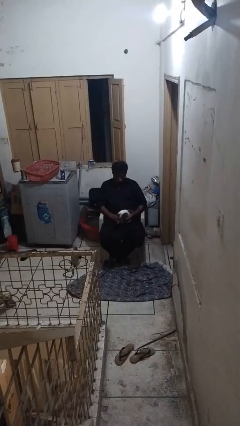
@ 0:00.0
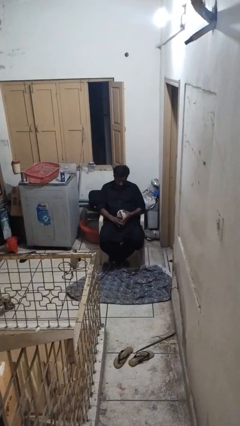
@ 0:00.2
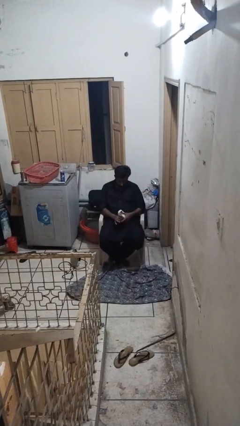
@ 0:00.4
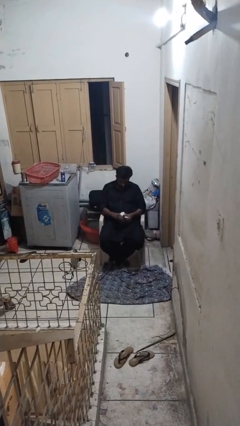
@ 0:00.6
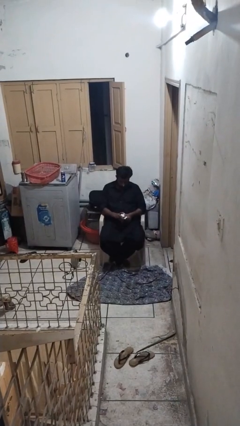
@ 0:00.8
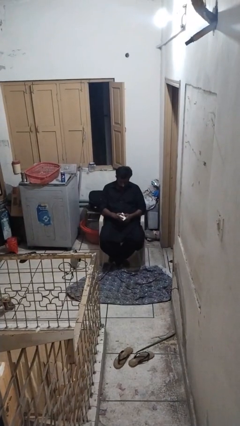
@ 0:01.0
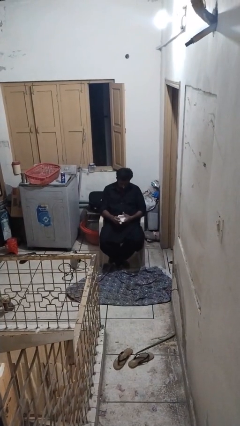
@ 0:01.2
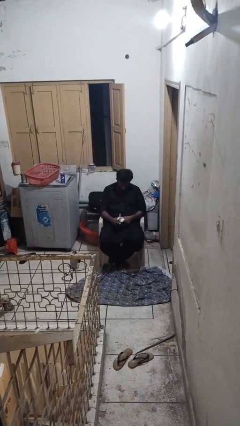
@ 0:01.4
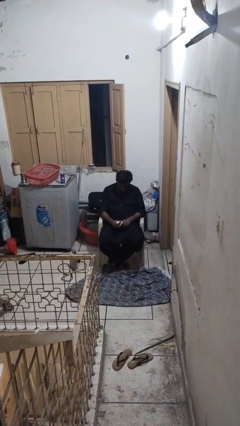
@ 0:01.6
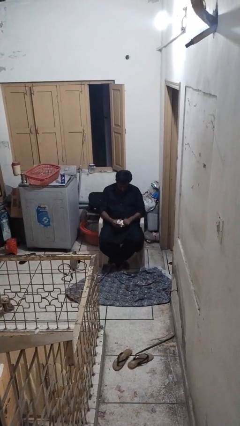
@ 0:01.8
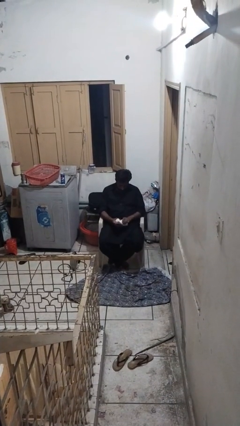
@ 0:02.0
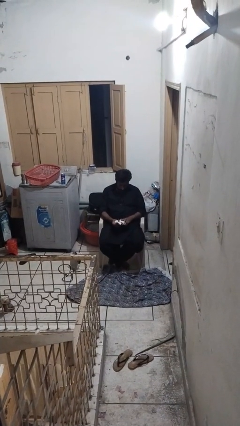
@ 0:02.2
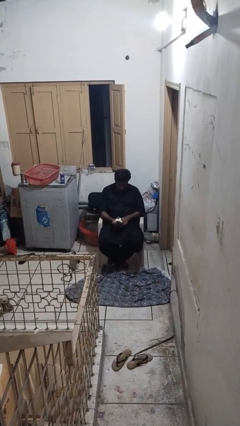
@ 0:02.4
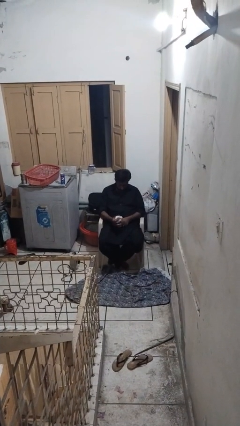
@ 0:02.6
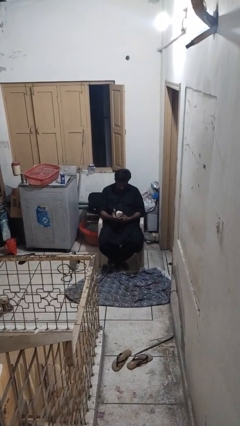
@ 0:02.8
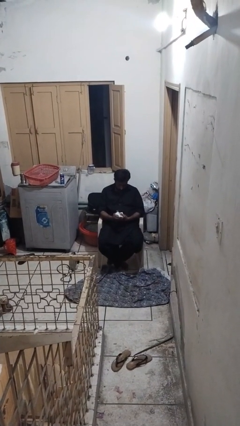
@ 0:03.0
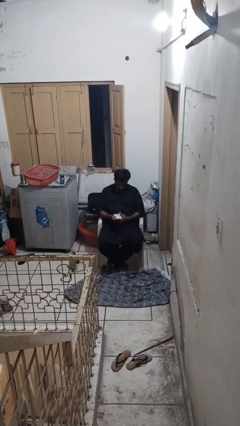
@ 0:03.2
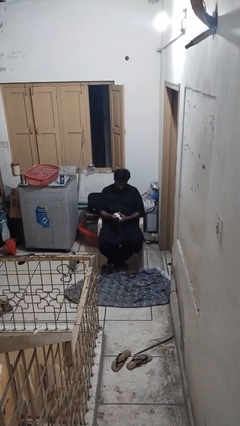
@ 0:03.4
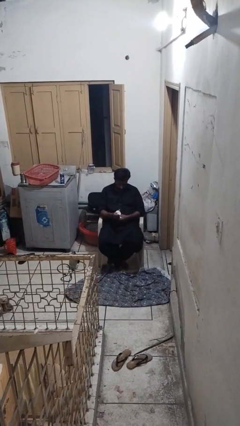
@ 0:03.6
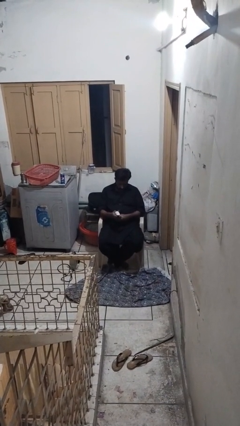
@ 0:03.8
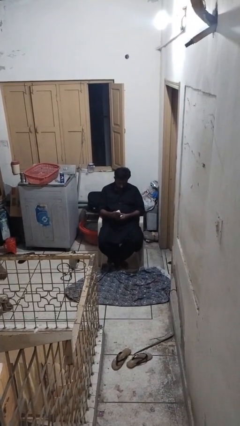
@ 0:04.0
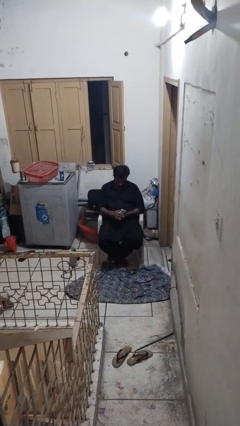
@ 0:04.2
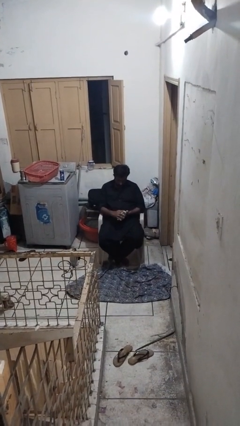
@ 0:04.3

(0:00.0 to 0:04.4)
person squeezes object

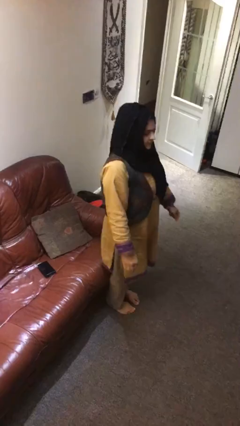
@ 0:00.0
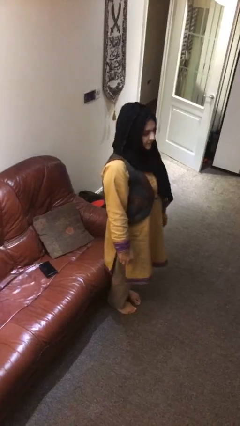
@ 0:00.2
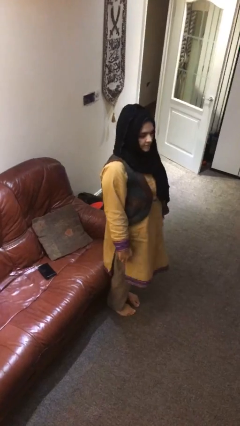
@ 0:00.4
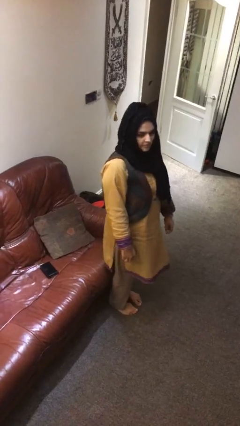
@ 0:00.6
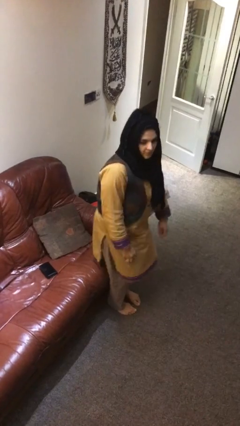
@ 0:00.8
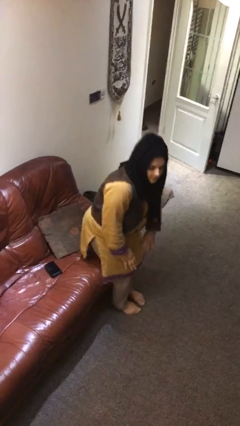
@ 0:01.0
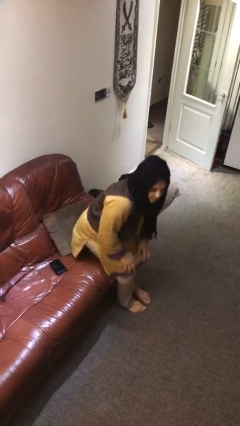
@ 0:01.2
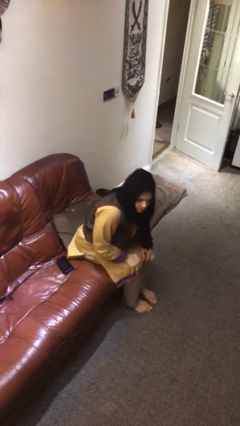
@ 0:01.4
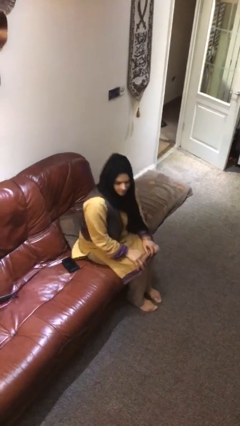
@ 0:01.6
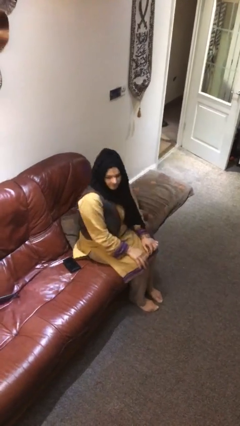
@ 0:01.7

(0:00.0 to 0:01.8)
person sits down

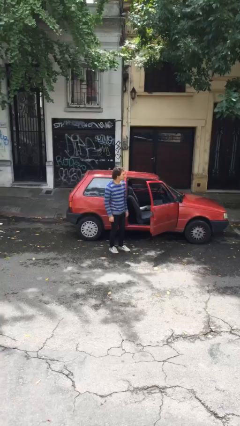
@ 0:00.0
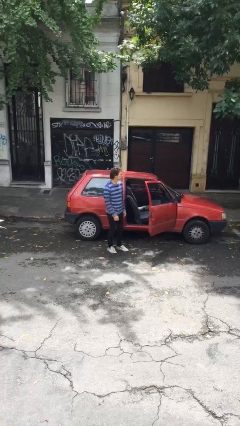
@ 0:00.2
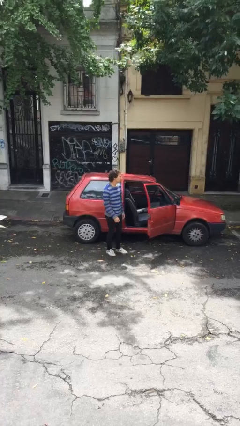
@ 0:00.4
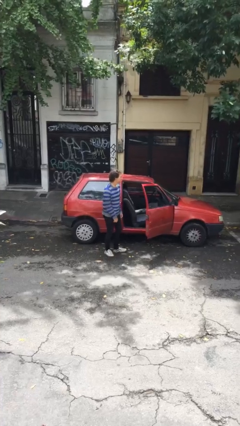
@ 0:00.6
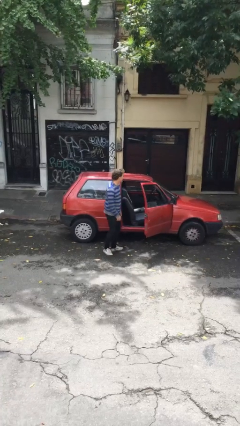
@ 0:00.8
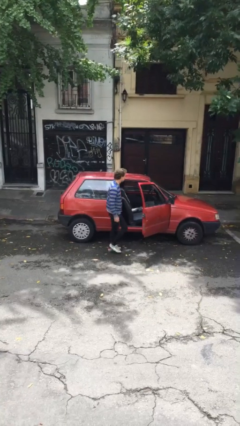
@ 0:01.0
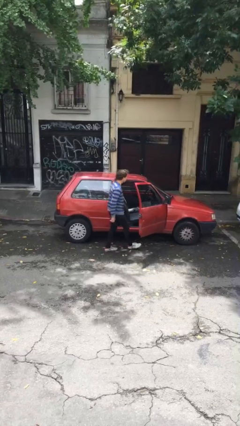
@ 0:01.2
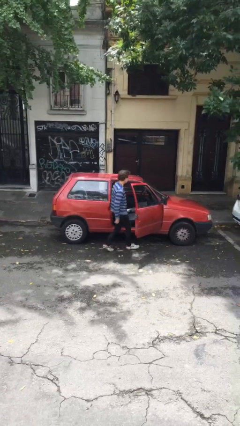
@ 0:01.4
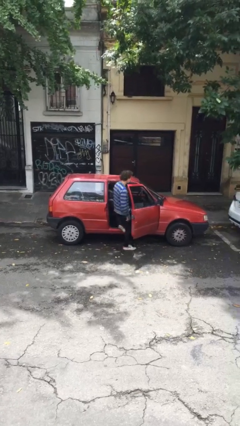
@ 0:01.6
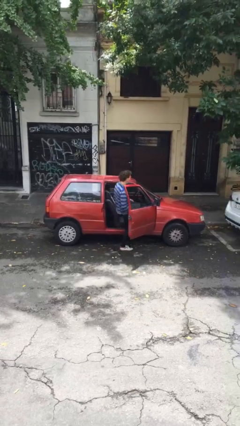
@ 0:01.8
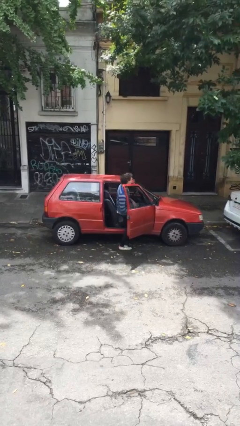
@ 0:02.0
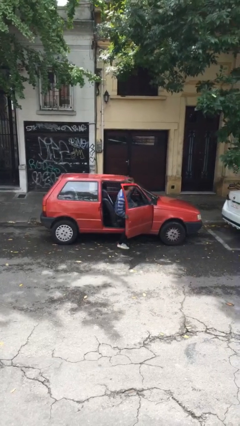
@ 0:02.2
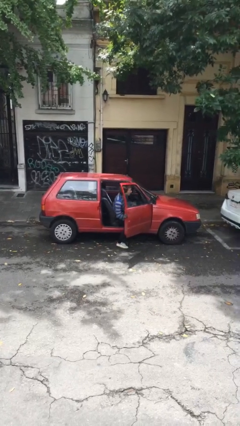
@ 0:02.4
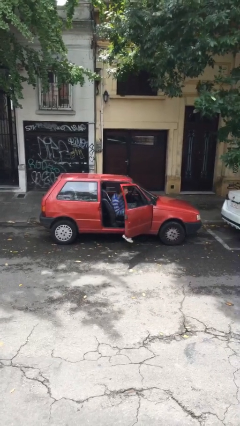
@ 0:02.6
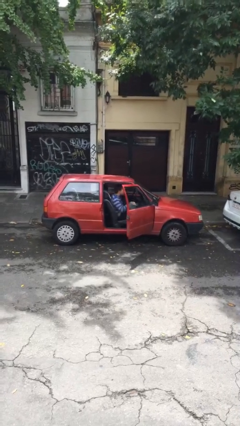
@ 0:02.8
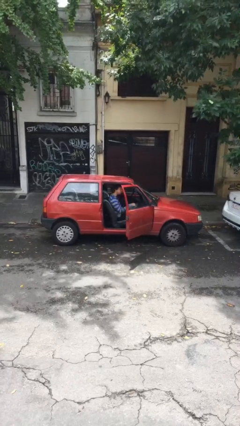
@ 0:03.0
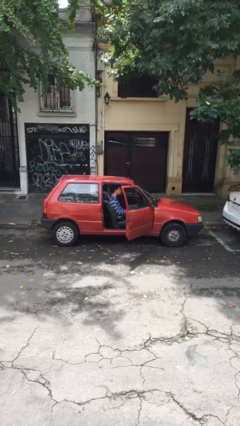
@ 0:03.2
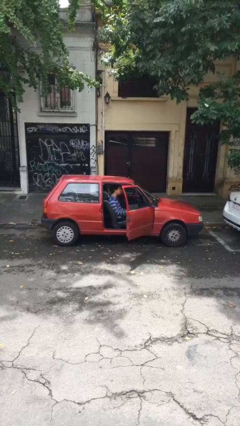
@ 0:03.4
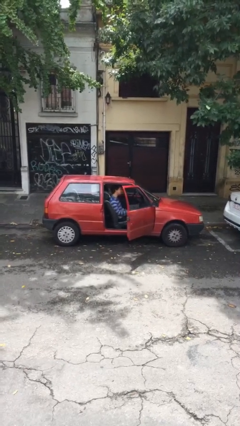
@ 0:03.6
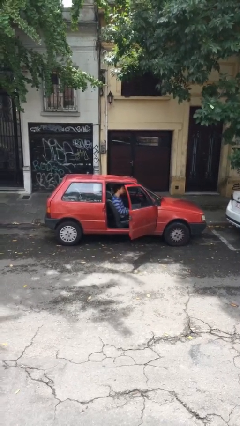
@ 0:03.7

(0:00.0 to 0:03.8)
person enters car

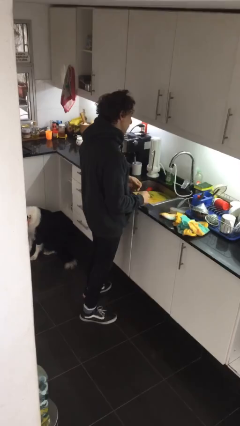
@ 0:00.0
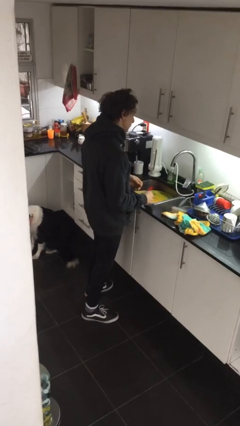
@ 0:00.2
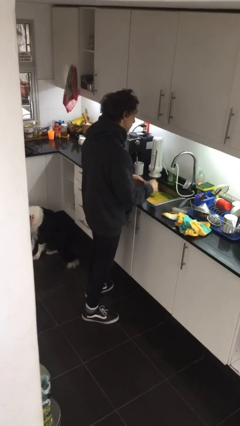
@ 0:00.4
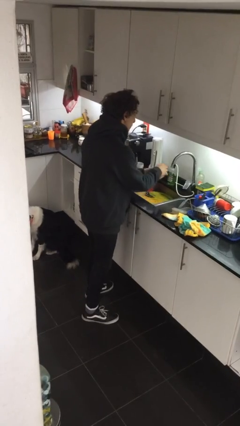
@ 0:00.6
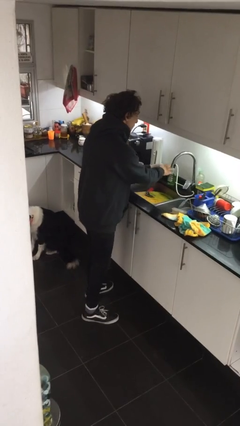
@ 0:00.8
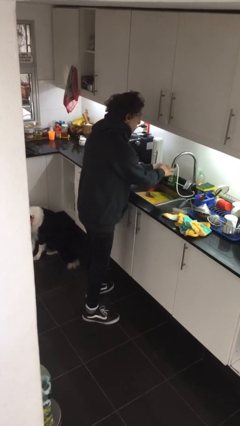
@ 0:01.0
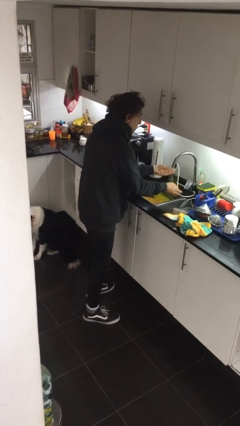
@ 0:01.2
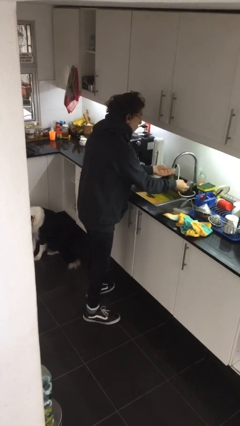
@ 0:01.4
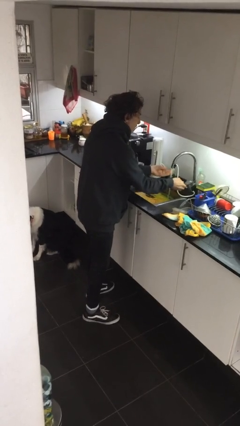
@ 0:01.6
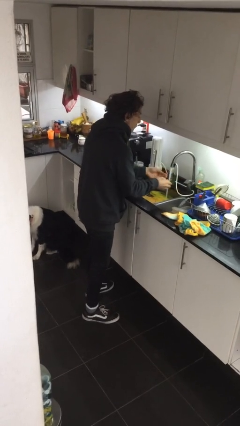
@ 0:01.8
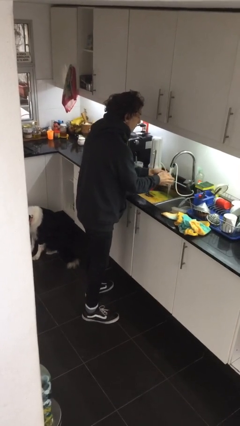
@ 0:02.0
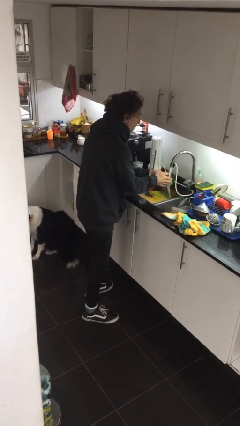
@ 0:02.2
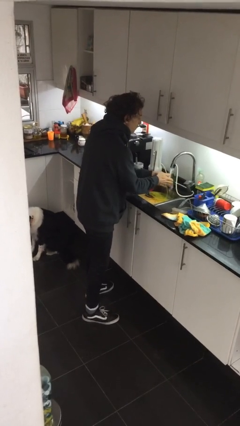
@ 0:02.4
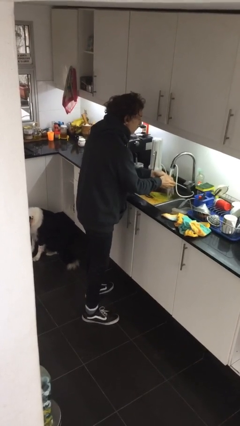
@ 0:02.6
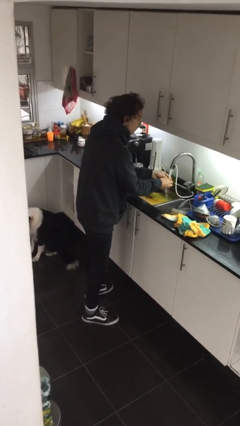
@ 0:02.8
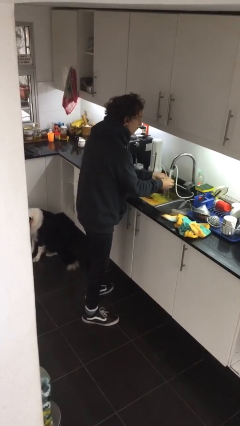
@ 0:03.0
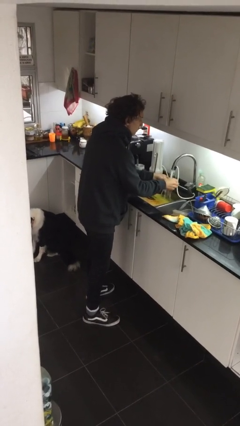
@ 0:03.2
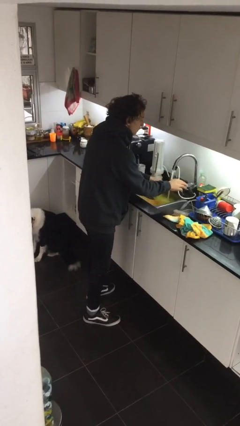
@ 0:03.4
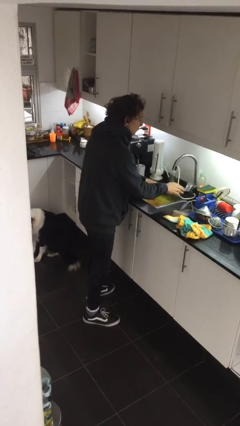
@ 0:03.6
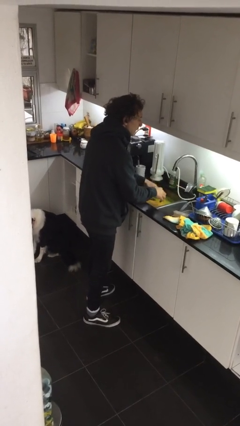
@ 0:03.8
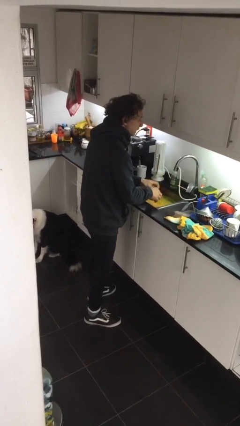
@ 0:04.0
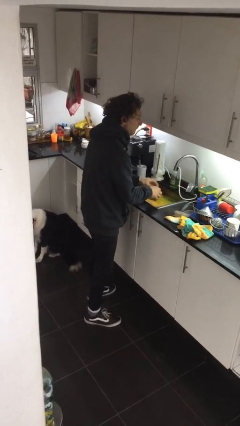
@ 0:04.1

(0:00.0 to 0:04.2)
person washes hands

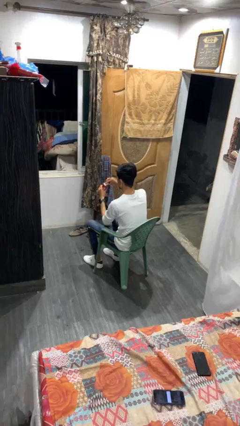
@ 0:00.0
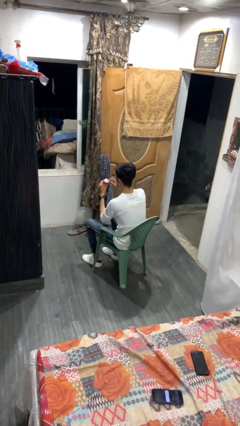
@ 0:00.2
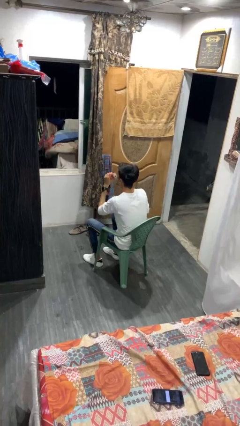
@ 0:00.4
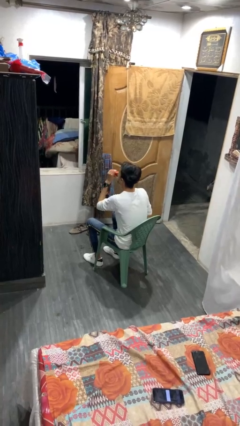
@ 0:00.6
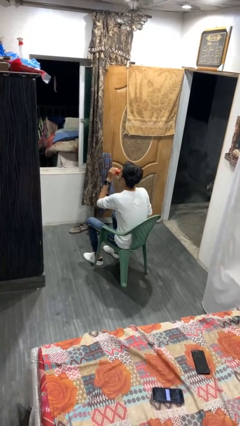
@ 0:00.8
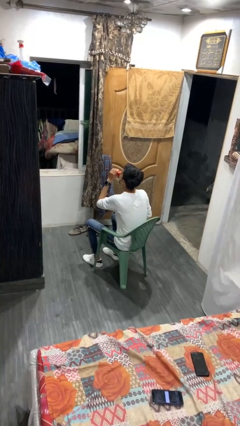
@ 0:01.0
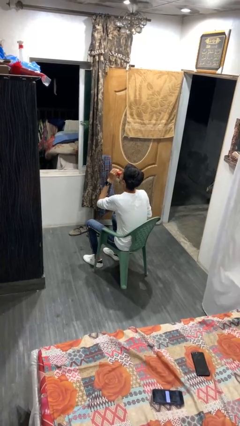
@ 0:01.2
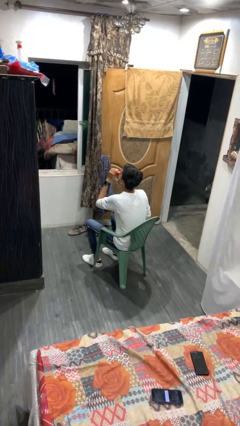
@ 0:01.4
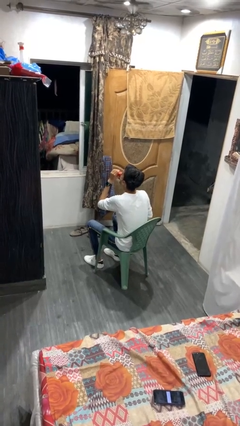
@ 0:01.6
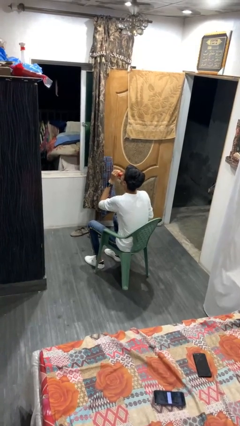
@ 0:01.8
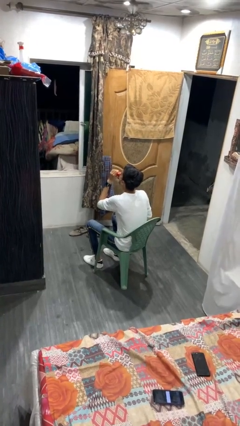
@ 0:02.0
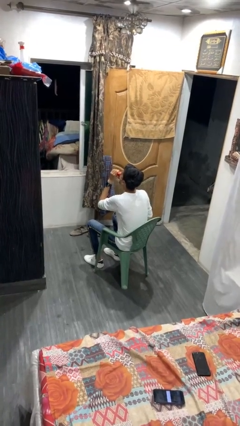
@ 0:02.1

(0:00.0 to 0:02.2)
person drinks from beverage can

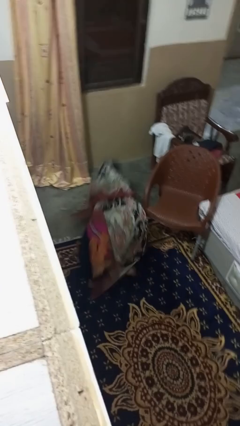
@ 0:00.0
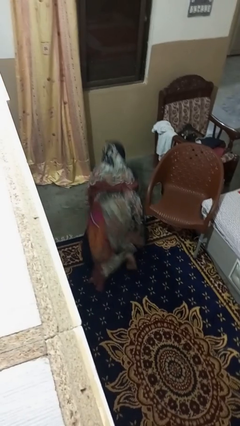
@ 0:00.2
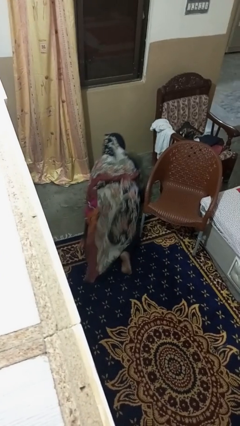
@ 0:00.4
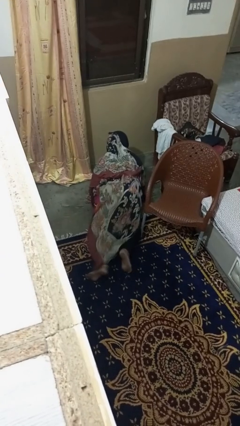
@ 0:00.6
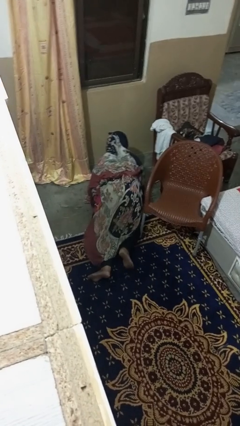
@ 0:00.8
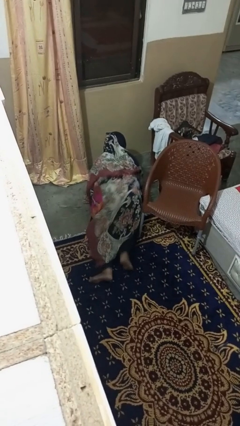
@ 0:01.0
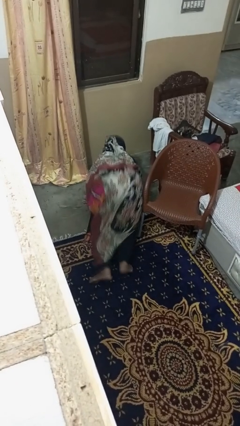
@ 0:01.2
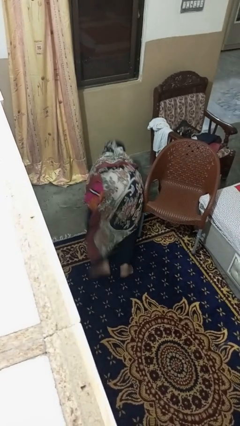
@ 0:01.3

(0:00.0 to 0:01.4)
person lies down on floor
